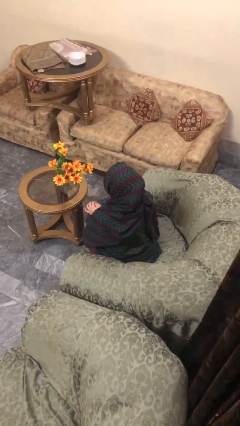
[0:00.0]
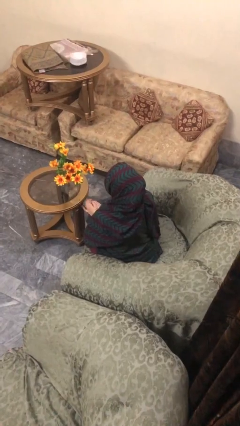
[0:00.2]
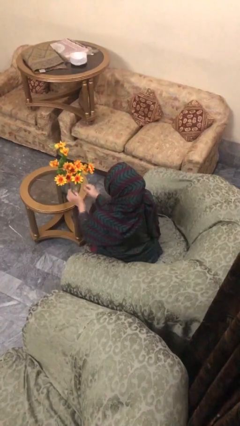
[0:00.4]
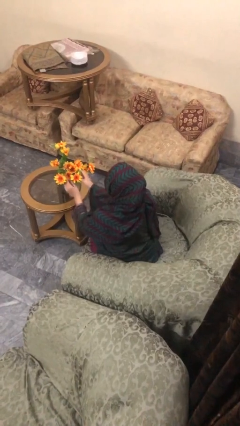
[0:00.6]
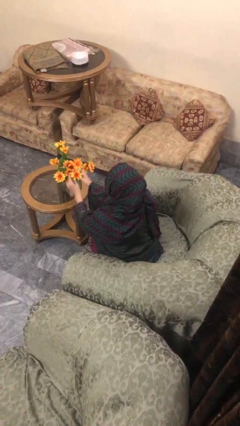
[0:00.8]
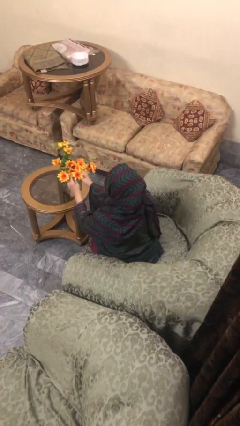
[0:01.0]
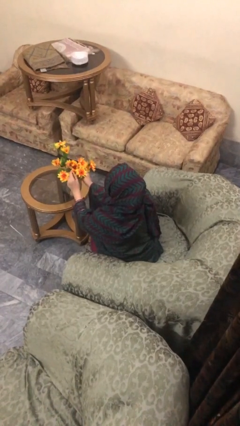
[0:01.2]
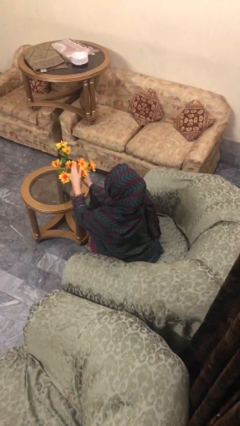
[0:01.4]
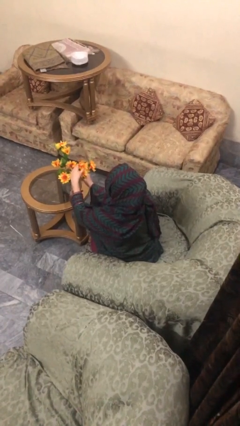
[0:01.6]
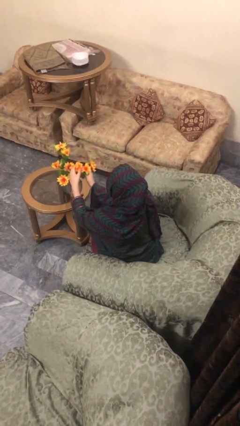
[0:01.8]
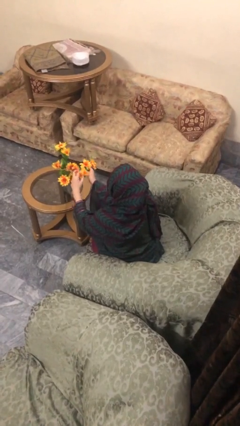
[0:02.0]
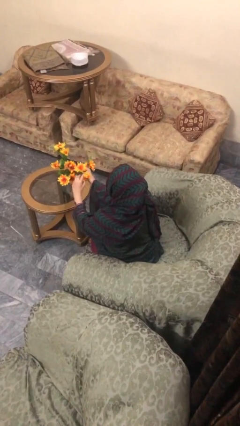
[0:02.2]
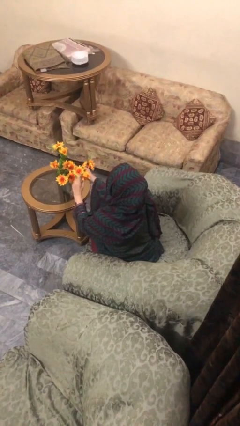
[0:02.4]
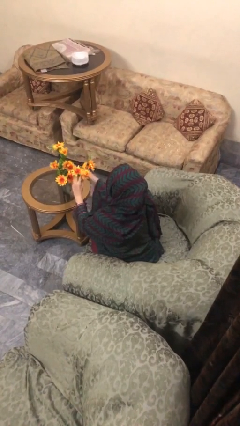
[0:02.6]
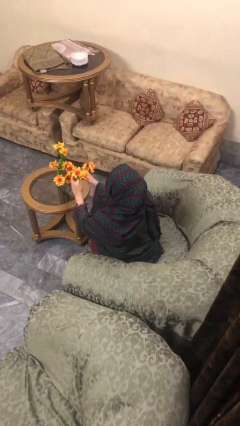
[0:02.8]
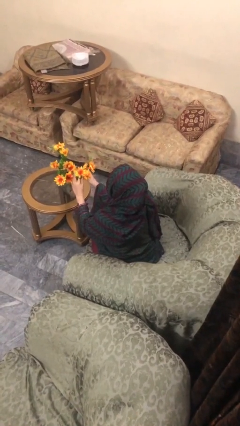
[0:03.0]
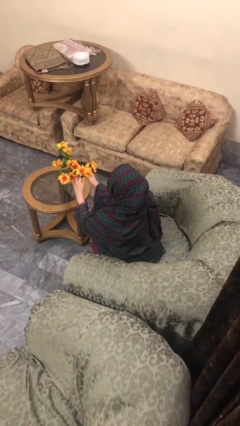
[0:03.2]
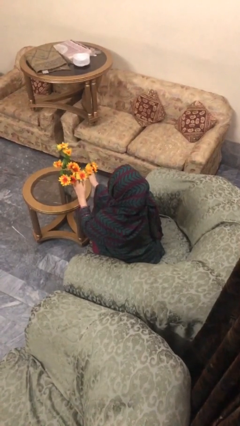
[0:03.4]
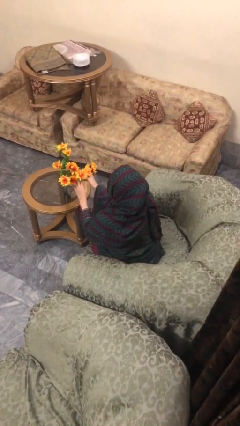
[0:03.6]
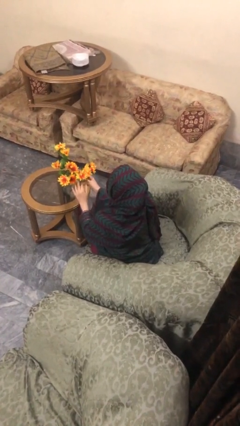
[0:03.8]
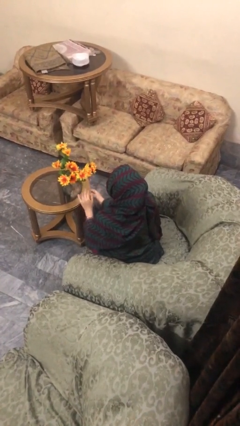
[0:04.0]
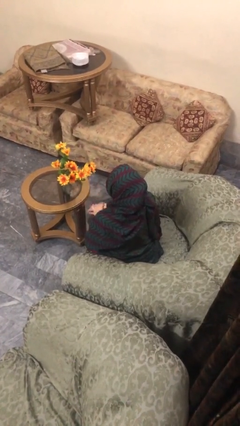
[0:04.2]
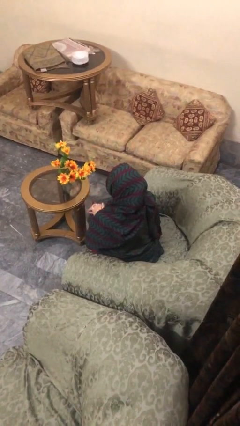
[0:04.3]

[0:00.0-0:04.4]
person arranges flowers in vase

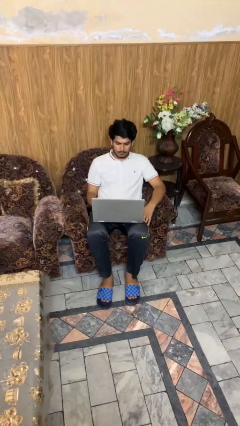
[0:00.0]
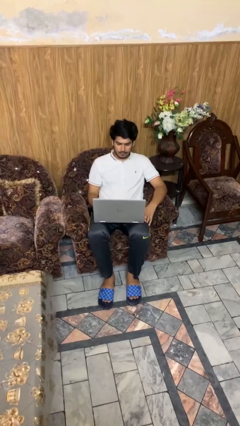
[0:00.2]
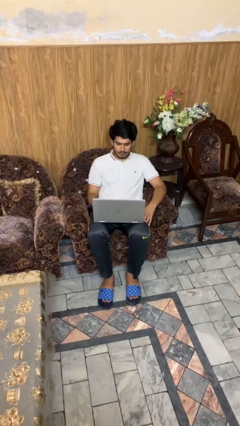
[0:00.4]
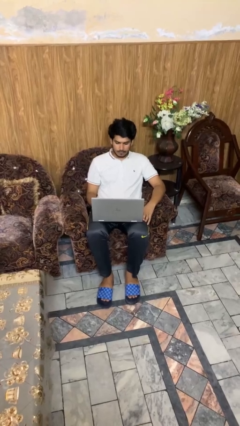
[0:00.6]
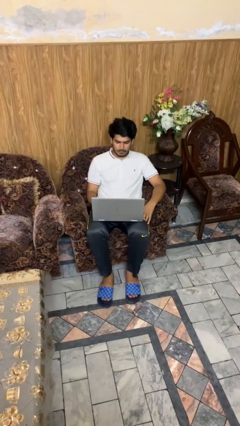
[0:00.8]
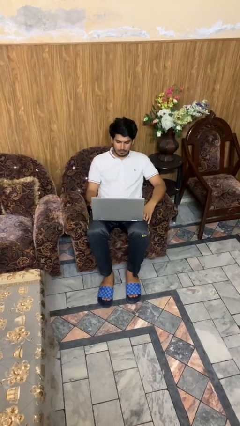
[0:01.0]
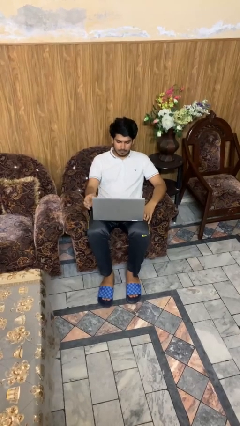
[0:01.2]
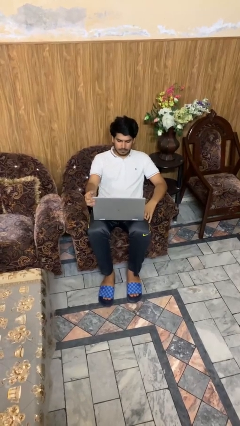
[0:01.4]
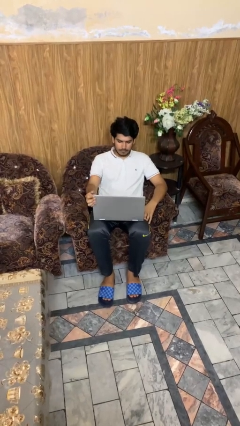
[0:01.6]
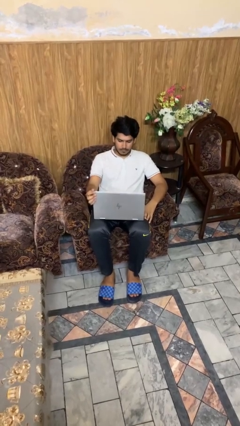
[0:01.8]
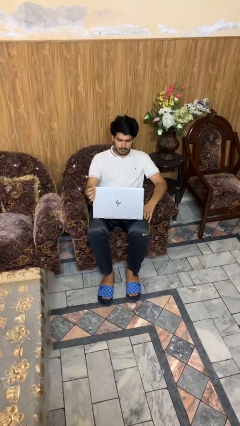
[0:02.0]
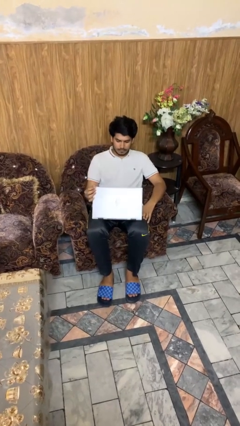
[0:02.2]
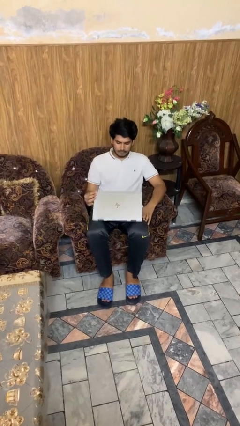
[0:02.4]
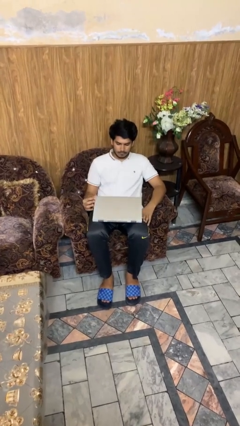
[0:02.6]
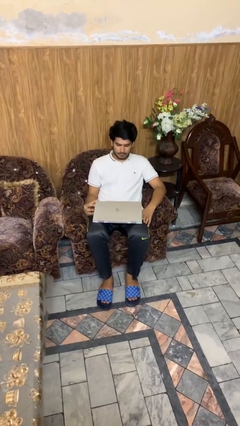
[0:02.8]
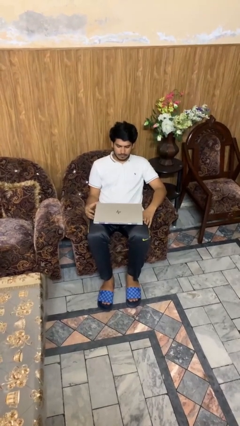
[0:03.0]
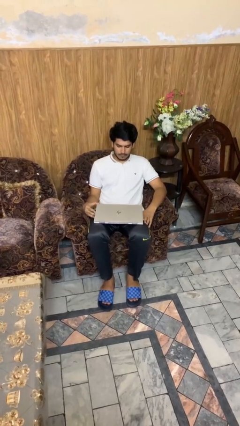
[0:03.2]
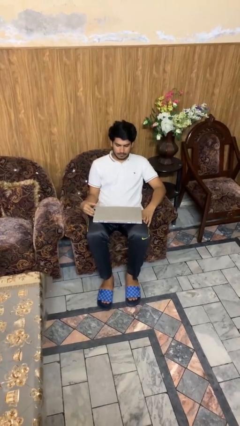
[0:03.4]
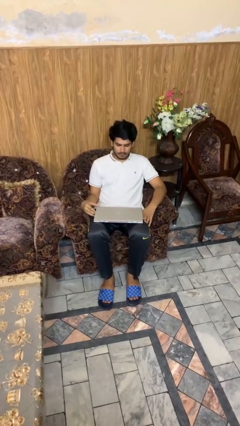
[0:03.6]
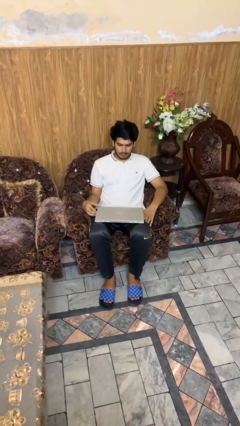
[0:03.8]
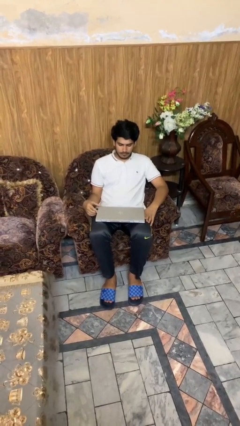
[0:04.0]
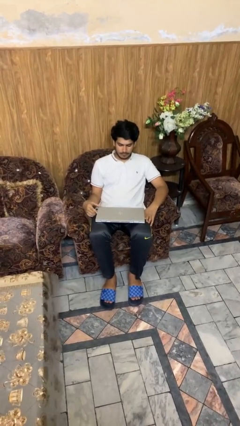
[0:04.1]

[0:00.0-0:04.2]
person closes laptop

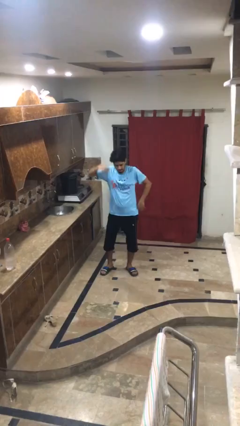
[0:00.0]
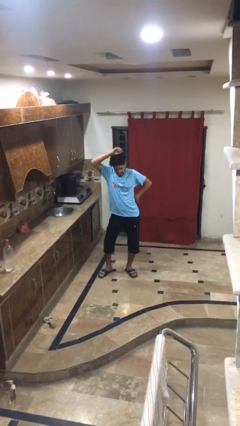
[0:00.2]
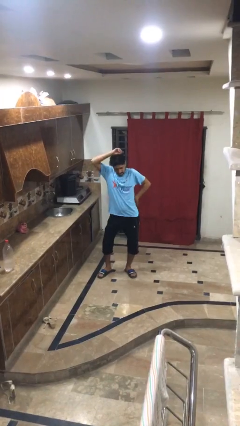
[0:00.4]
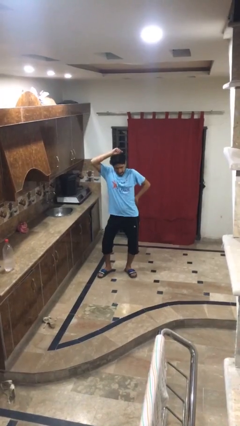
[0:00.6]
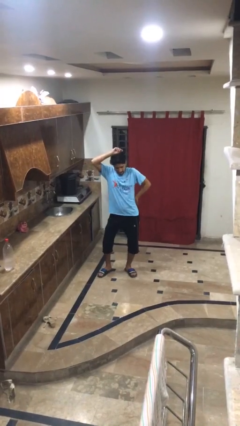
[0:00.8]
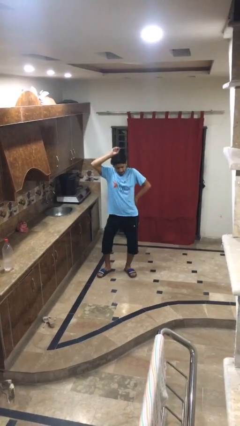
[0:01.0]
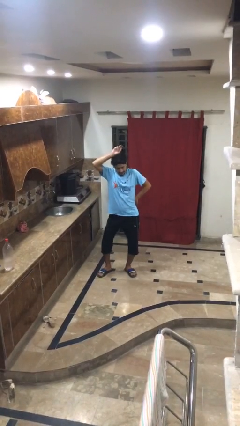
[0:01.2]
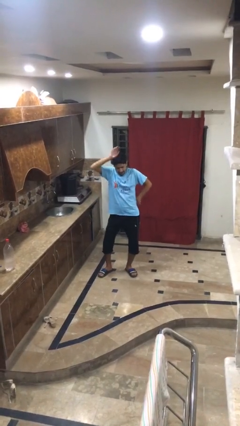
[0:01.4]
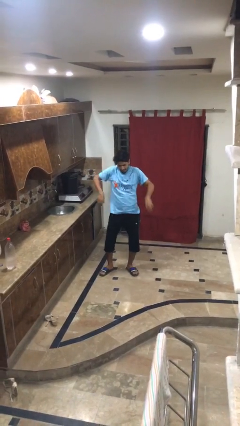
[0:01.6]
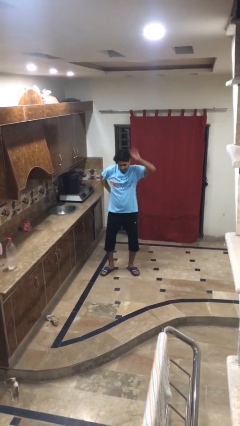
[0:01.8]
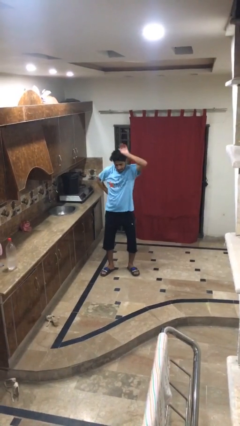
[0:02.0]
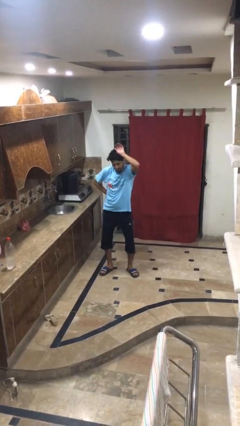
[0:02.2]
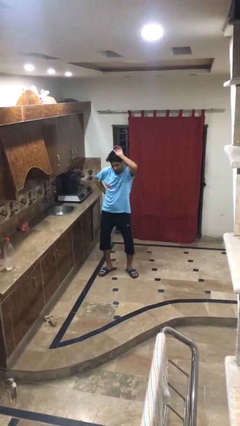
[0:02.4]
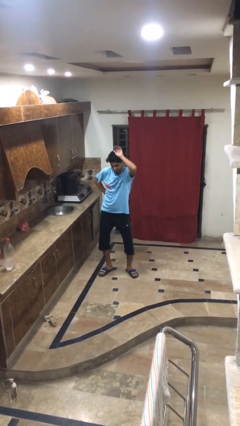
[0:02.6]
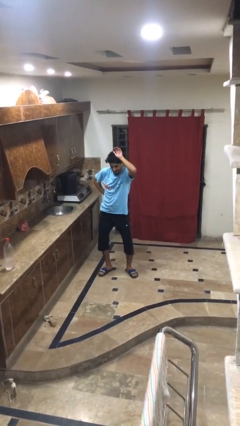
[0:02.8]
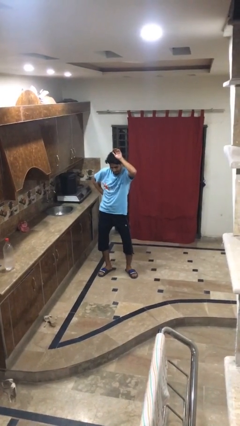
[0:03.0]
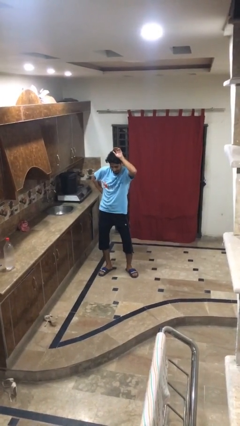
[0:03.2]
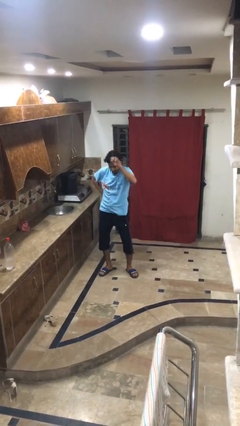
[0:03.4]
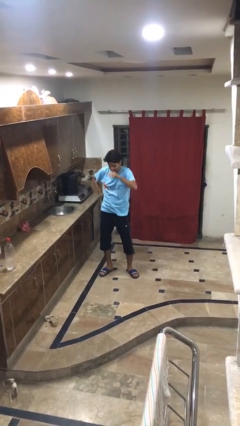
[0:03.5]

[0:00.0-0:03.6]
person dances in place

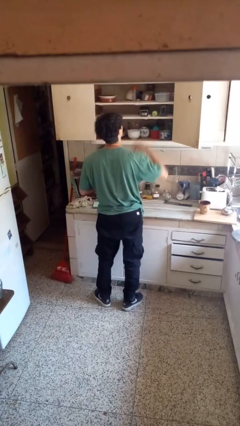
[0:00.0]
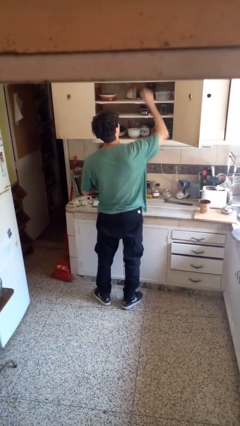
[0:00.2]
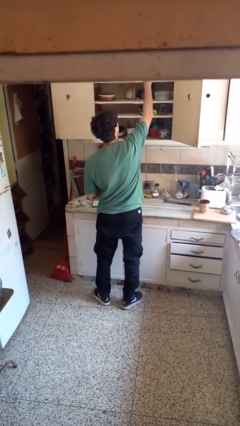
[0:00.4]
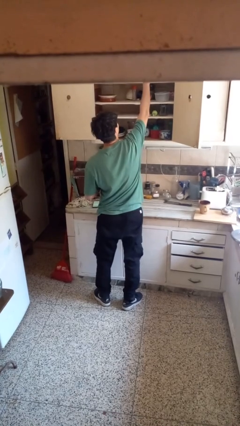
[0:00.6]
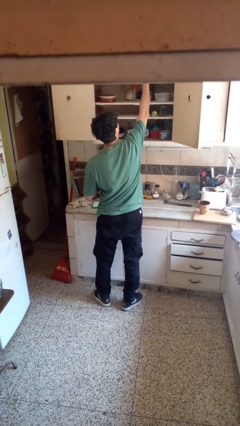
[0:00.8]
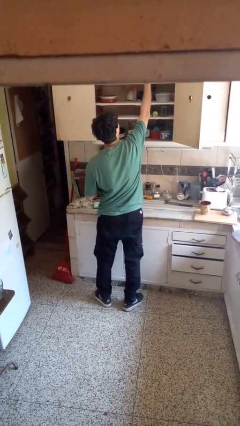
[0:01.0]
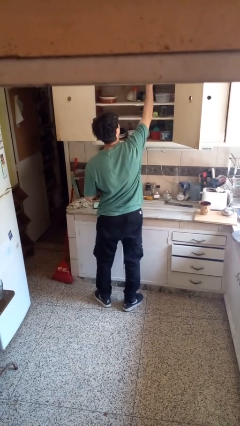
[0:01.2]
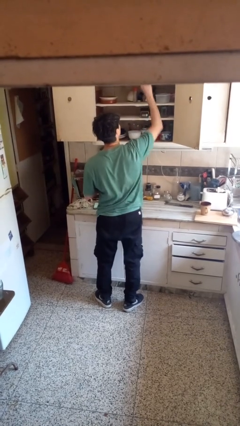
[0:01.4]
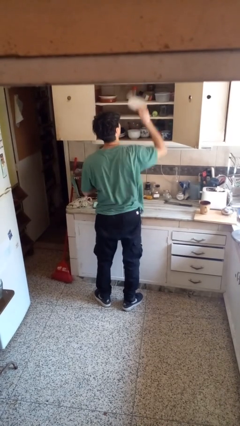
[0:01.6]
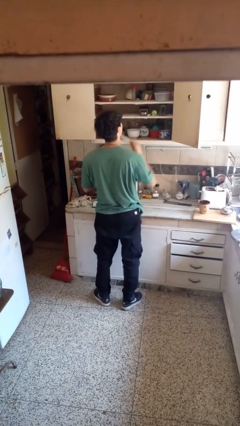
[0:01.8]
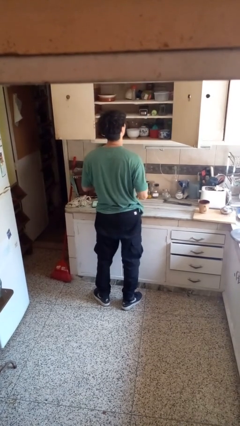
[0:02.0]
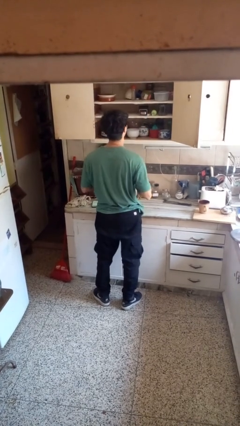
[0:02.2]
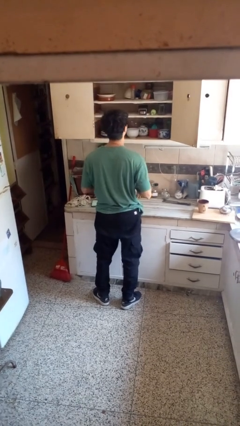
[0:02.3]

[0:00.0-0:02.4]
person takes object from cabinet

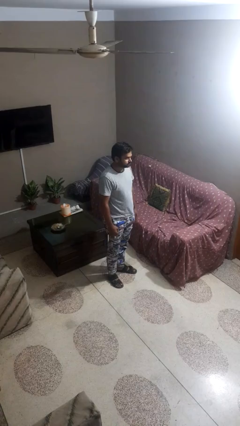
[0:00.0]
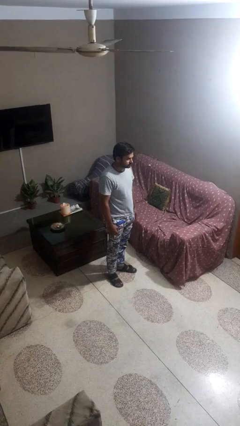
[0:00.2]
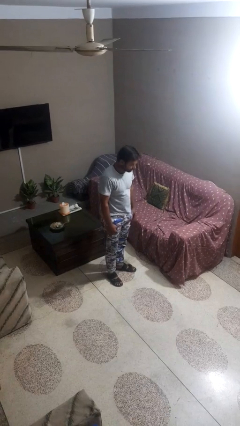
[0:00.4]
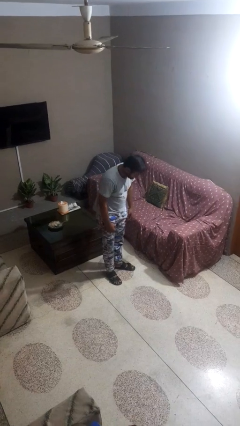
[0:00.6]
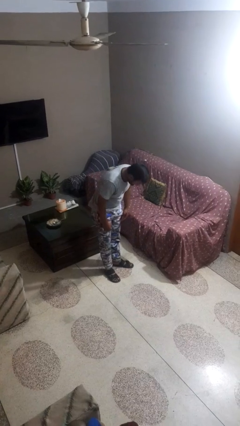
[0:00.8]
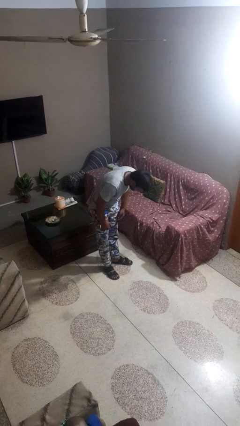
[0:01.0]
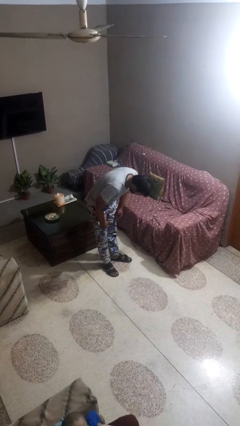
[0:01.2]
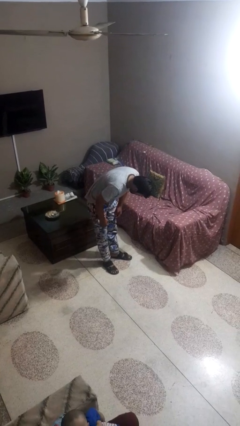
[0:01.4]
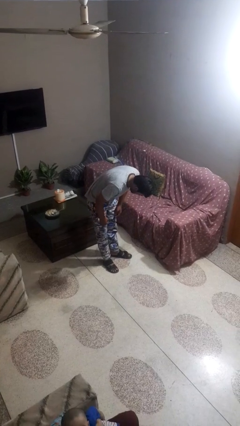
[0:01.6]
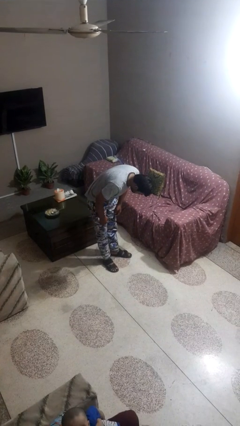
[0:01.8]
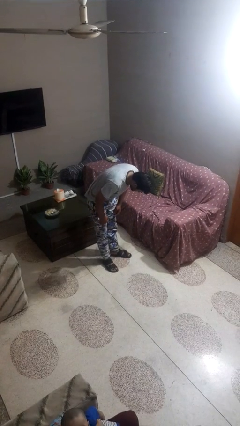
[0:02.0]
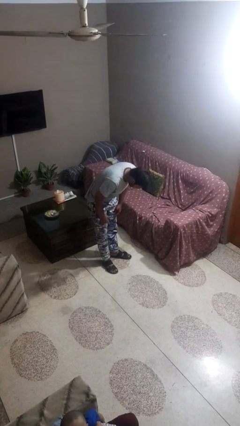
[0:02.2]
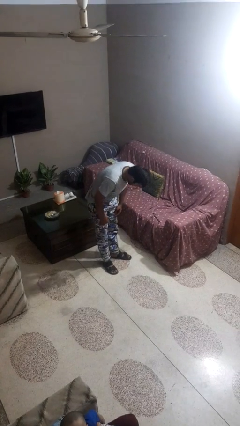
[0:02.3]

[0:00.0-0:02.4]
person bows
